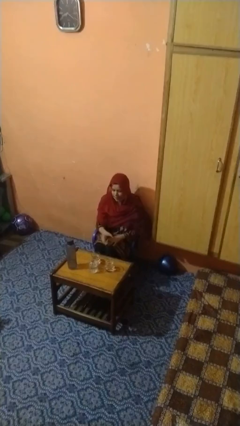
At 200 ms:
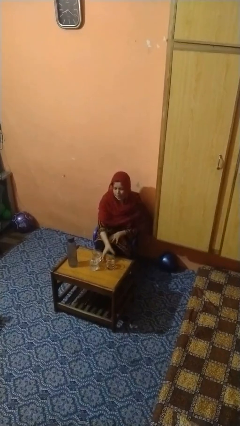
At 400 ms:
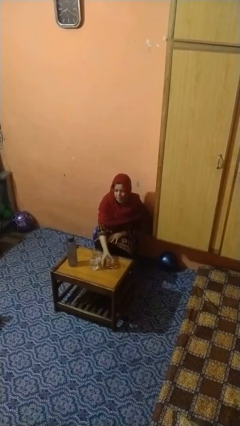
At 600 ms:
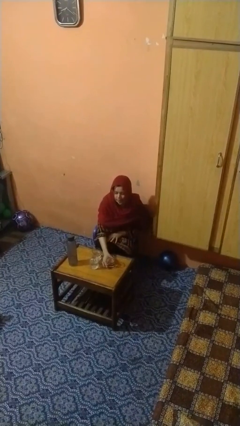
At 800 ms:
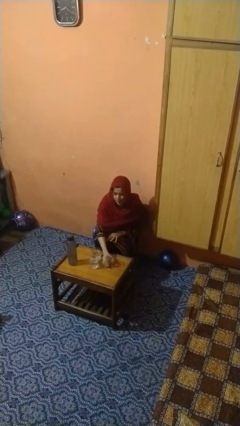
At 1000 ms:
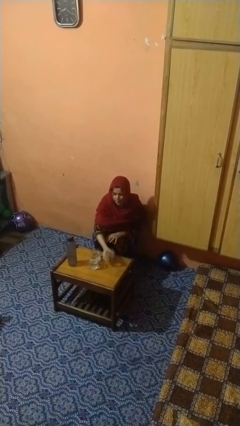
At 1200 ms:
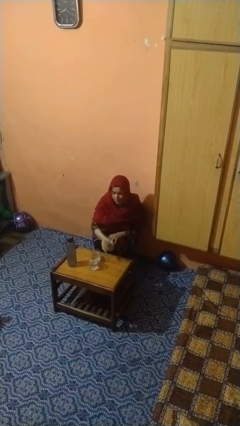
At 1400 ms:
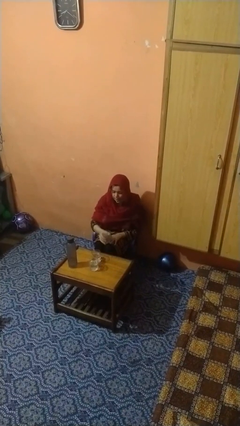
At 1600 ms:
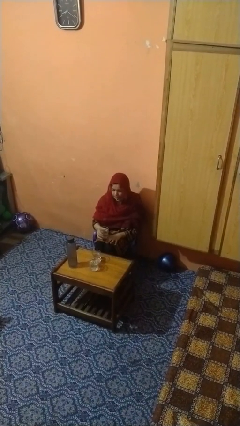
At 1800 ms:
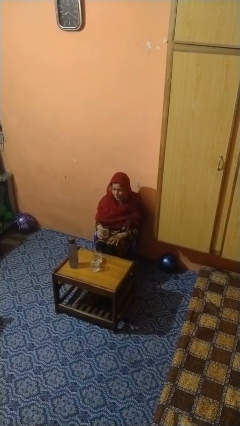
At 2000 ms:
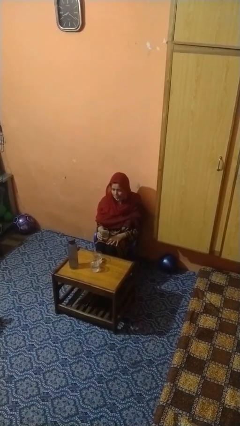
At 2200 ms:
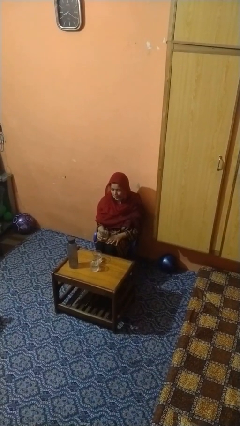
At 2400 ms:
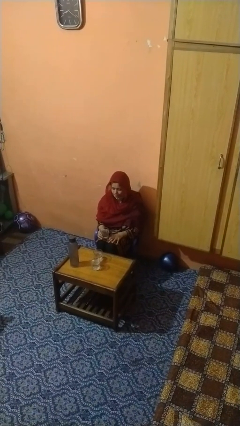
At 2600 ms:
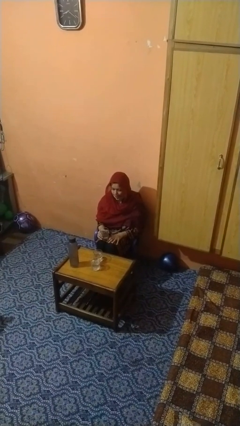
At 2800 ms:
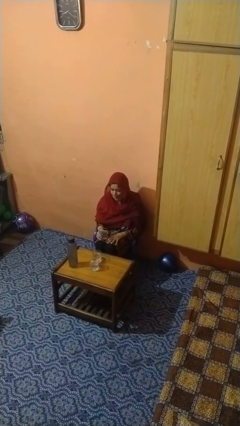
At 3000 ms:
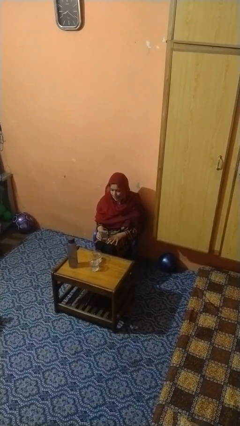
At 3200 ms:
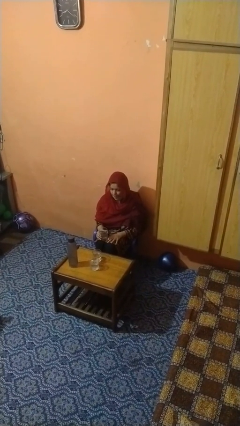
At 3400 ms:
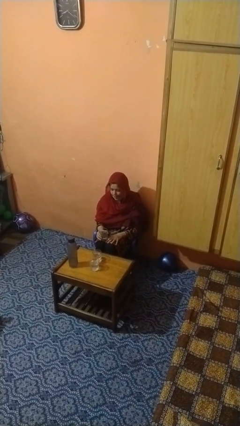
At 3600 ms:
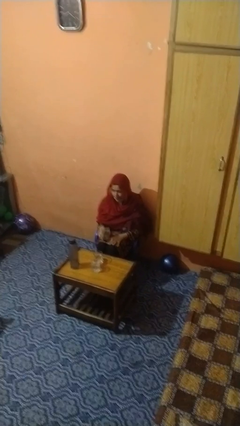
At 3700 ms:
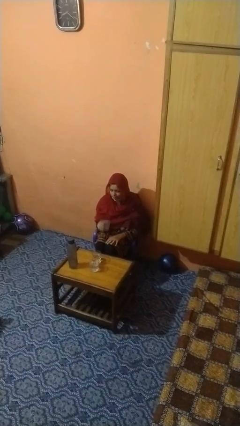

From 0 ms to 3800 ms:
person picks up object from table

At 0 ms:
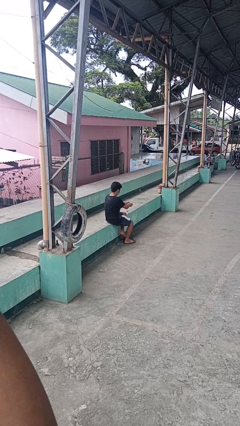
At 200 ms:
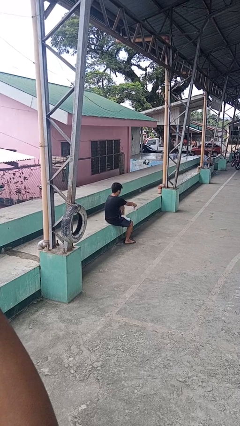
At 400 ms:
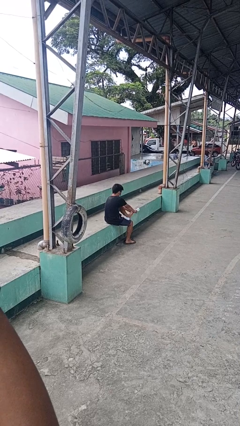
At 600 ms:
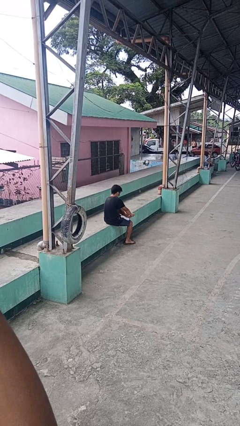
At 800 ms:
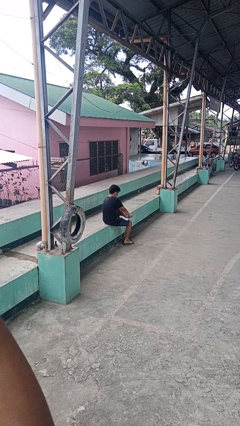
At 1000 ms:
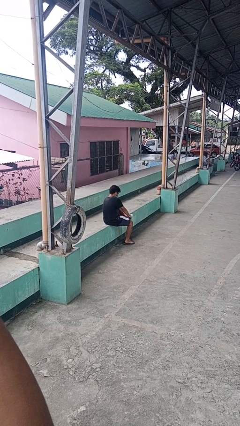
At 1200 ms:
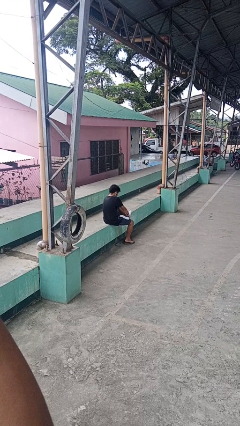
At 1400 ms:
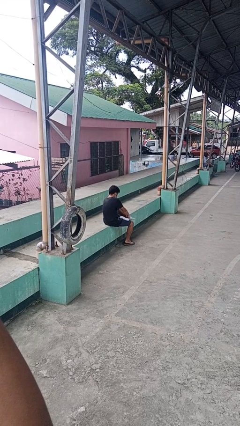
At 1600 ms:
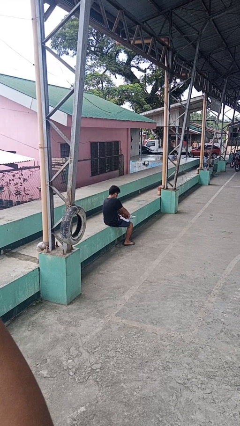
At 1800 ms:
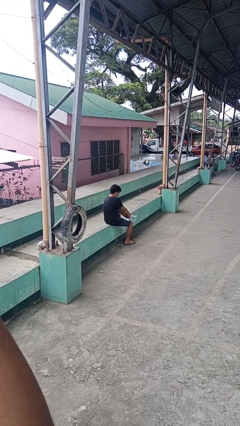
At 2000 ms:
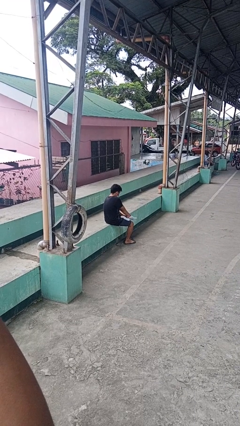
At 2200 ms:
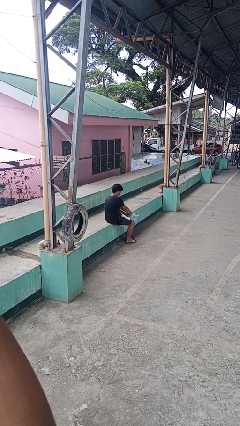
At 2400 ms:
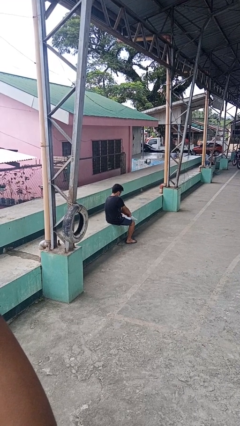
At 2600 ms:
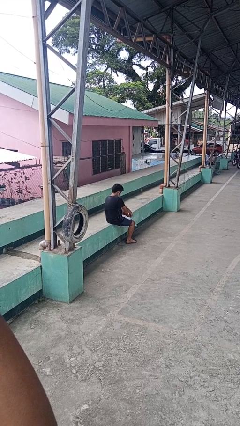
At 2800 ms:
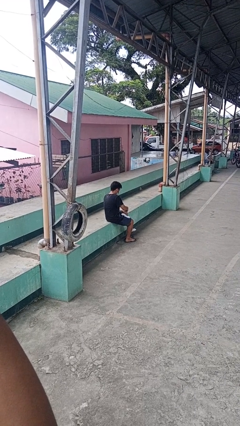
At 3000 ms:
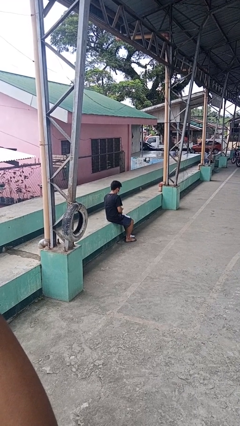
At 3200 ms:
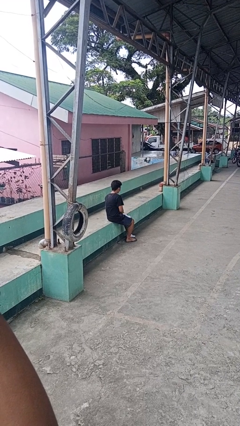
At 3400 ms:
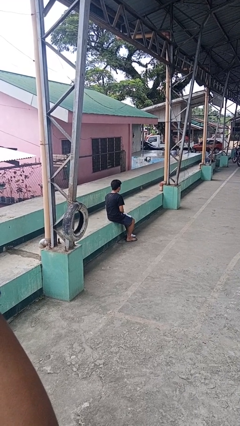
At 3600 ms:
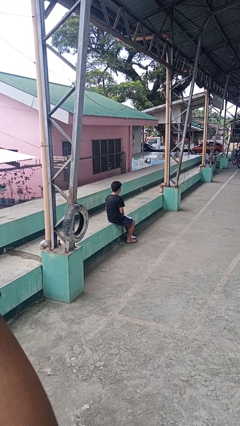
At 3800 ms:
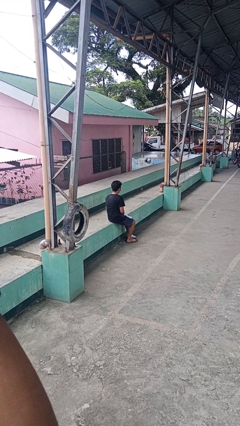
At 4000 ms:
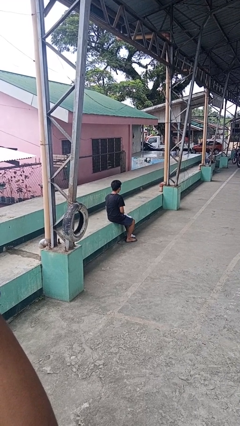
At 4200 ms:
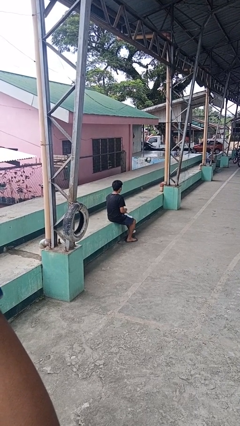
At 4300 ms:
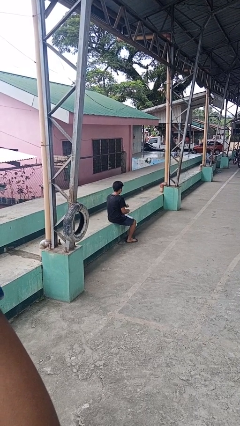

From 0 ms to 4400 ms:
person puts on socks

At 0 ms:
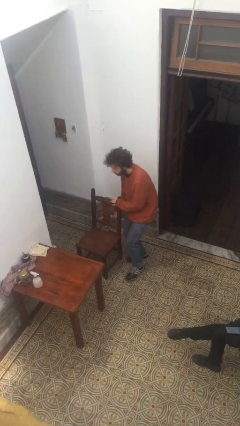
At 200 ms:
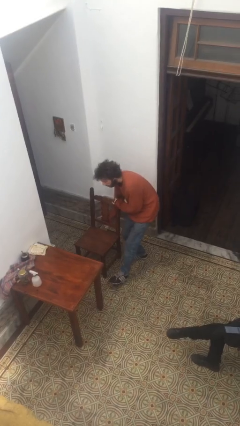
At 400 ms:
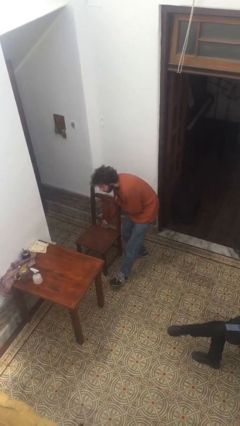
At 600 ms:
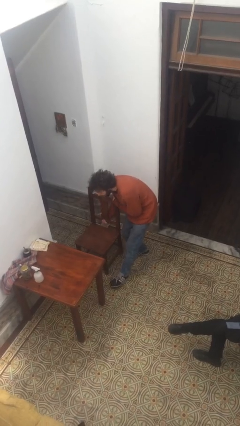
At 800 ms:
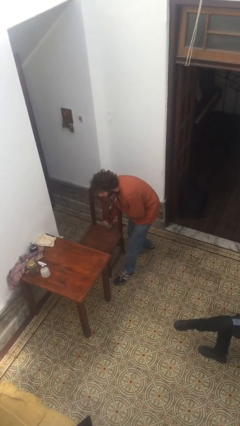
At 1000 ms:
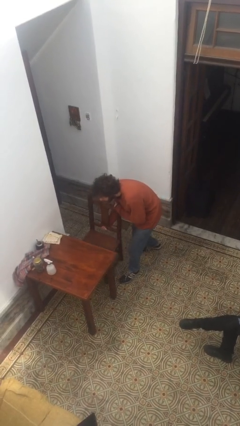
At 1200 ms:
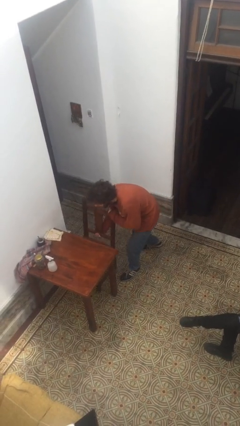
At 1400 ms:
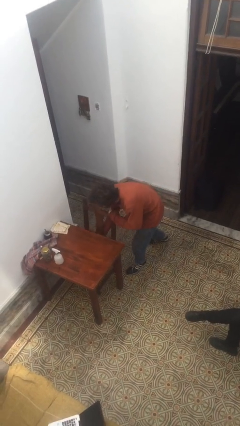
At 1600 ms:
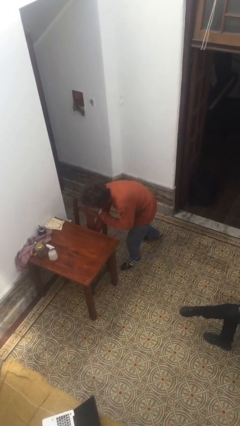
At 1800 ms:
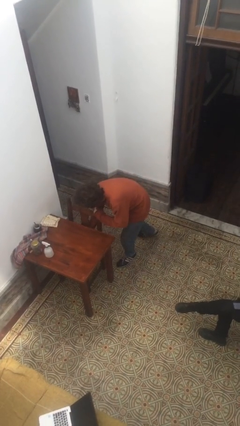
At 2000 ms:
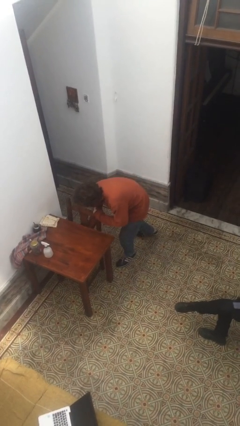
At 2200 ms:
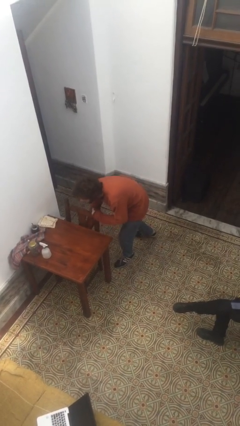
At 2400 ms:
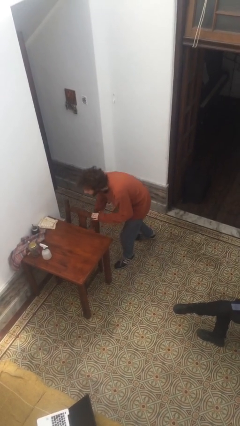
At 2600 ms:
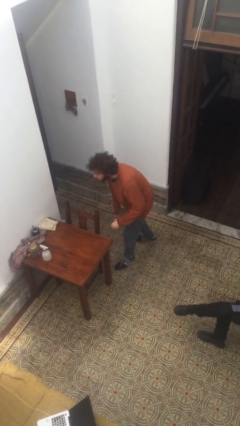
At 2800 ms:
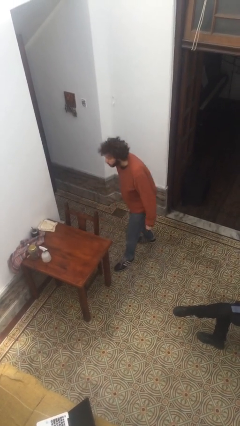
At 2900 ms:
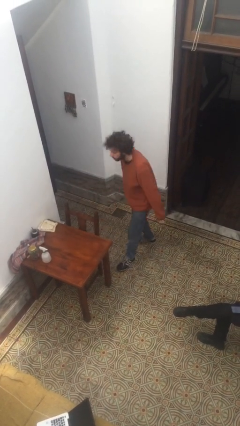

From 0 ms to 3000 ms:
person pushes in chair

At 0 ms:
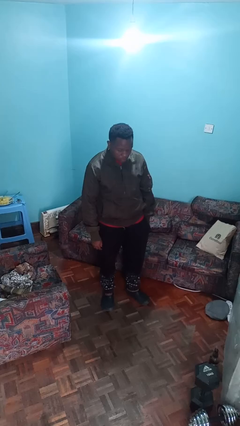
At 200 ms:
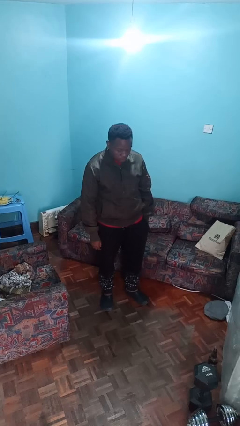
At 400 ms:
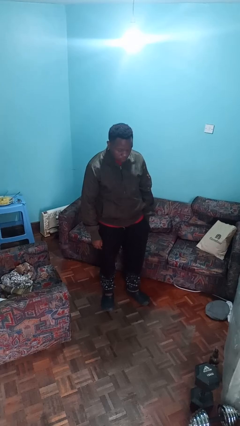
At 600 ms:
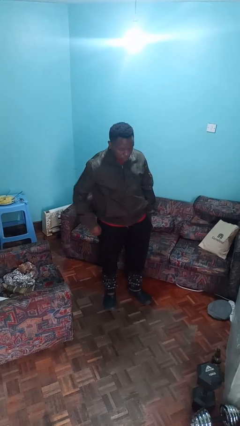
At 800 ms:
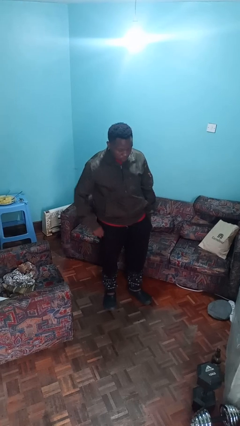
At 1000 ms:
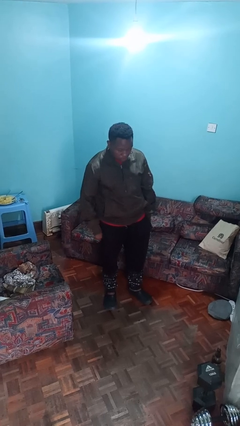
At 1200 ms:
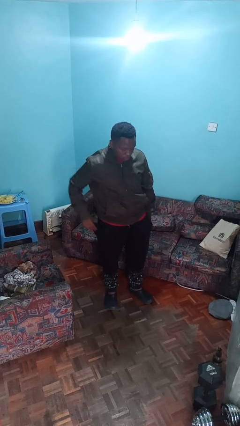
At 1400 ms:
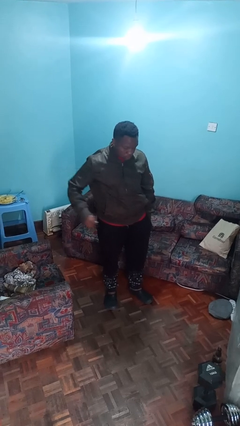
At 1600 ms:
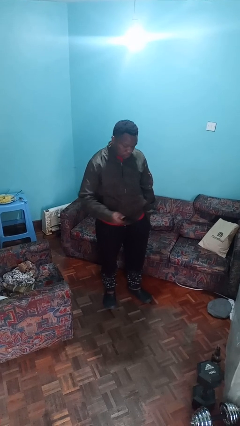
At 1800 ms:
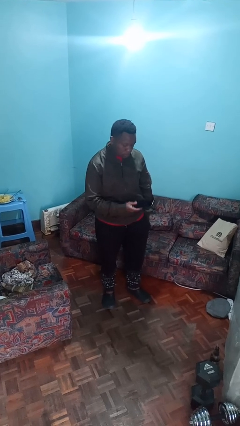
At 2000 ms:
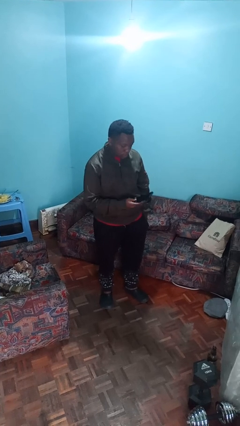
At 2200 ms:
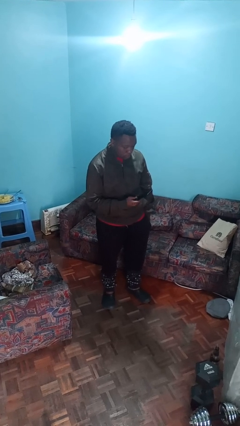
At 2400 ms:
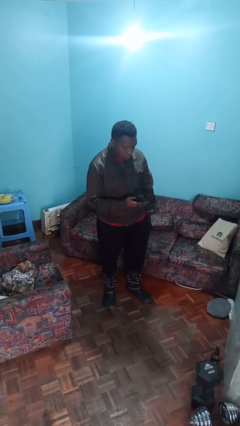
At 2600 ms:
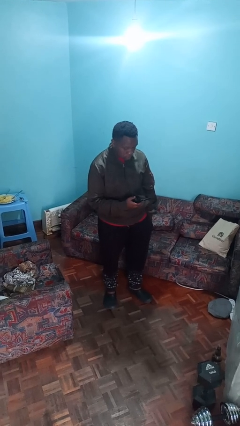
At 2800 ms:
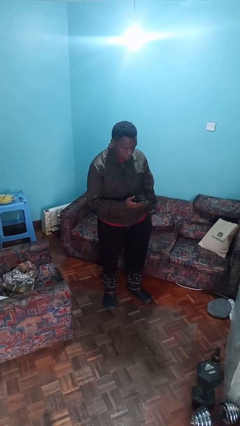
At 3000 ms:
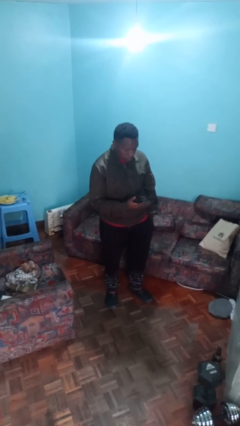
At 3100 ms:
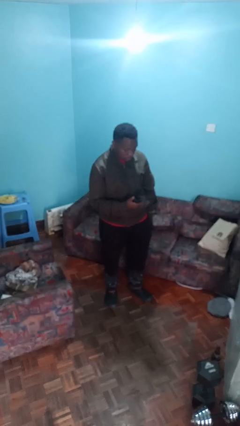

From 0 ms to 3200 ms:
person takes phone from pocket

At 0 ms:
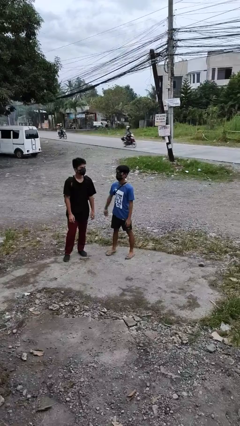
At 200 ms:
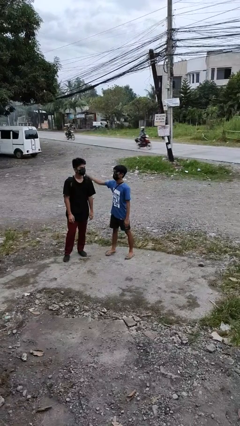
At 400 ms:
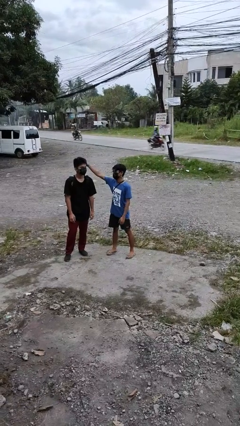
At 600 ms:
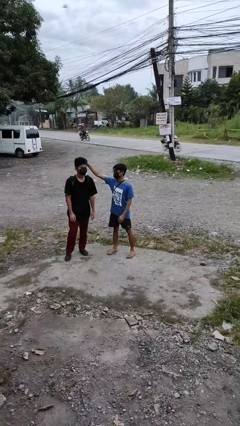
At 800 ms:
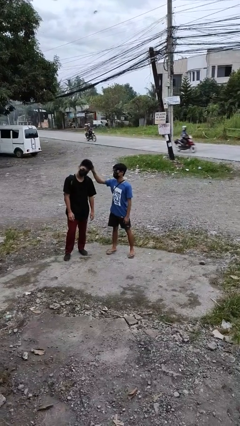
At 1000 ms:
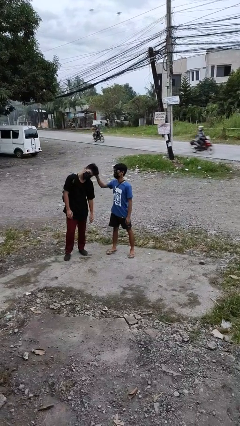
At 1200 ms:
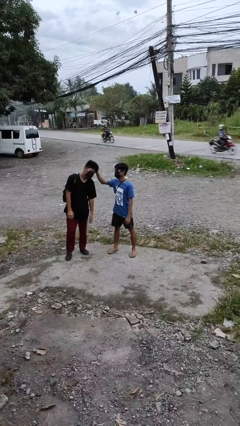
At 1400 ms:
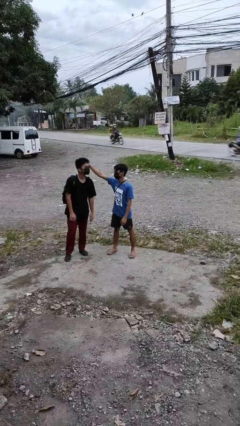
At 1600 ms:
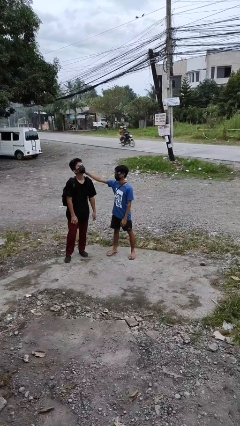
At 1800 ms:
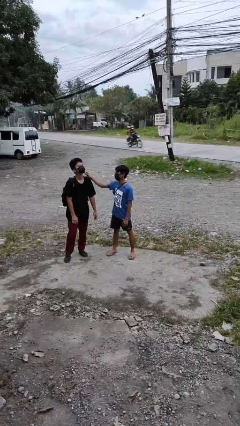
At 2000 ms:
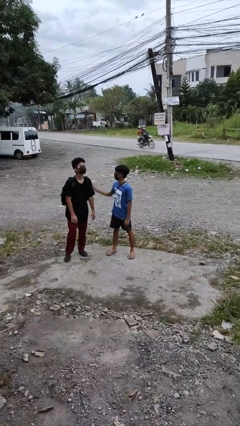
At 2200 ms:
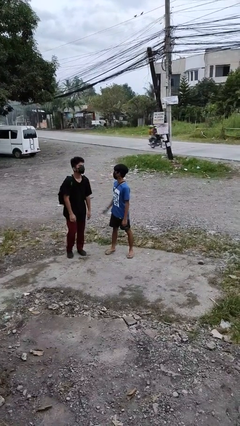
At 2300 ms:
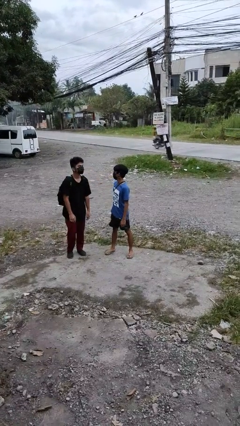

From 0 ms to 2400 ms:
person grabs person by hair

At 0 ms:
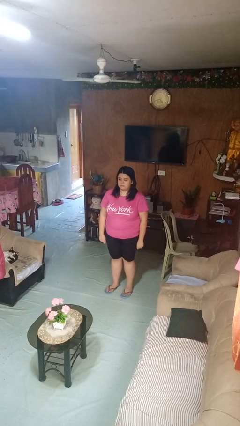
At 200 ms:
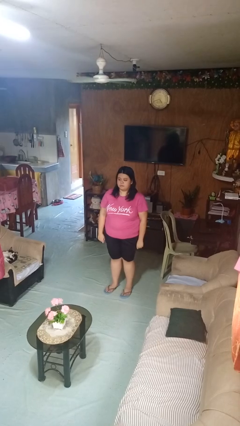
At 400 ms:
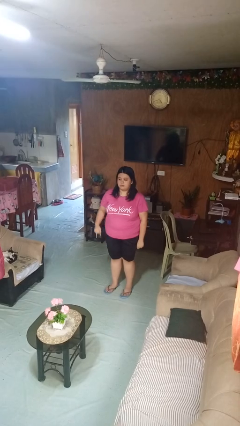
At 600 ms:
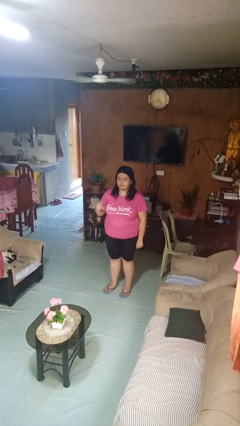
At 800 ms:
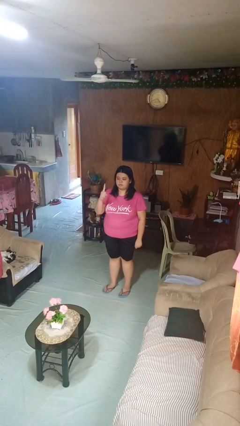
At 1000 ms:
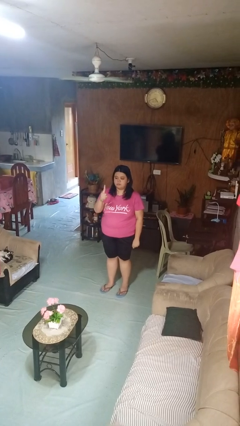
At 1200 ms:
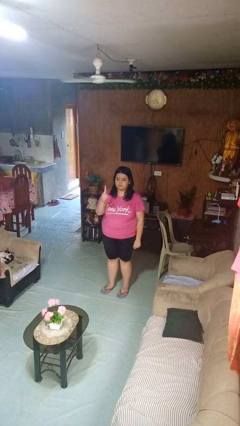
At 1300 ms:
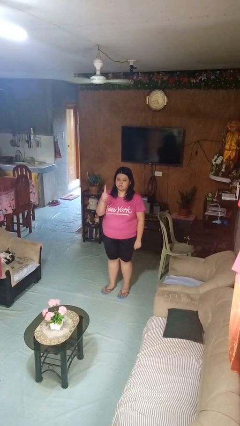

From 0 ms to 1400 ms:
person gestures number one
